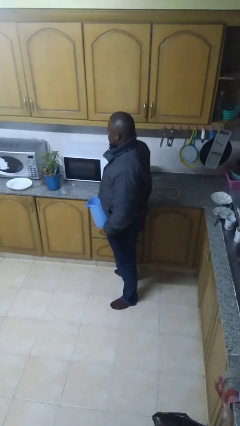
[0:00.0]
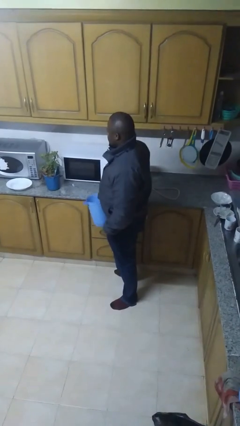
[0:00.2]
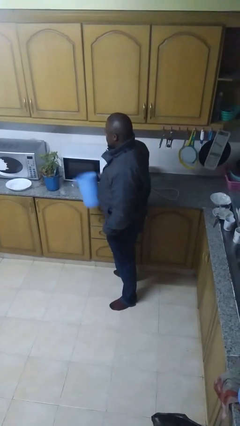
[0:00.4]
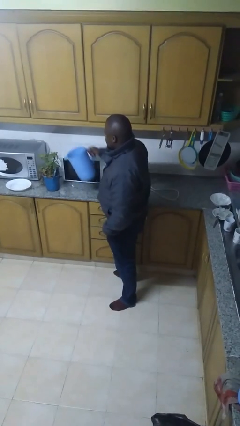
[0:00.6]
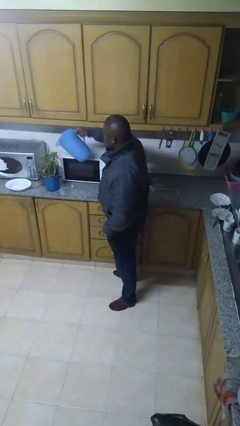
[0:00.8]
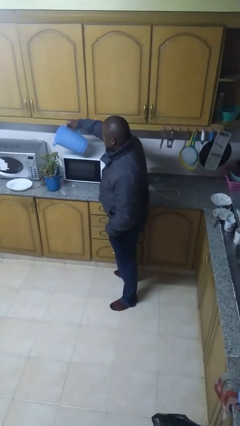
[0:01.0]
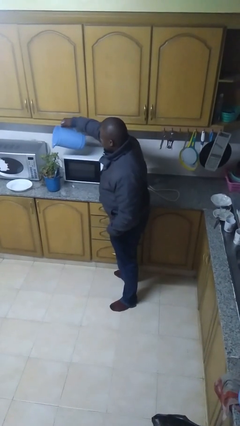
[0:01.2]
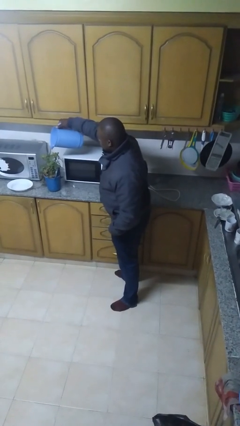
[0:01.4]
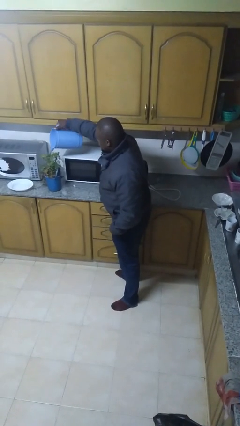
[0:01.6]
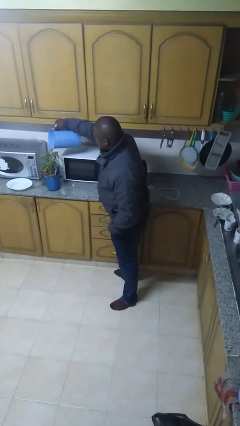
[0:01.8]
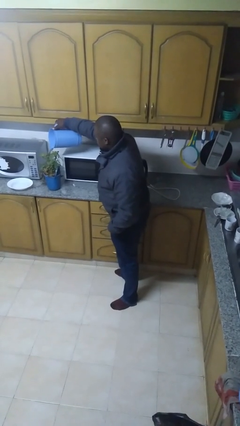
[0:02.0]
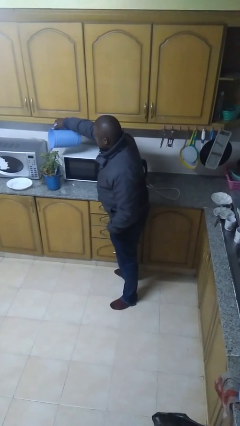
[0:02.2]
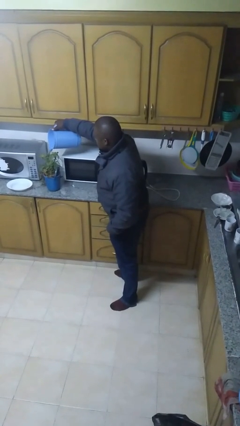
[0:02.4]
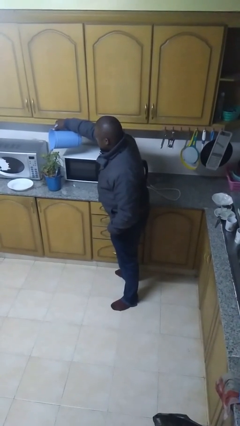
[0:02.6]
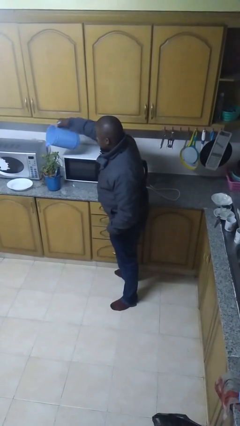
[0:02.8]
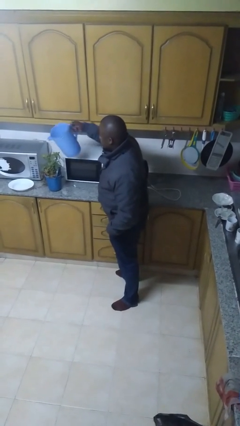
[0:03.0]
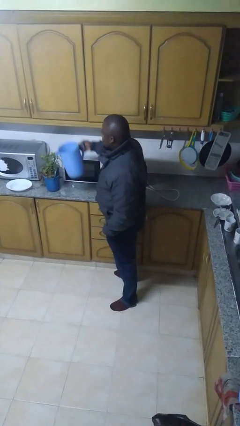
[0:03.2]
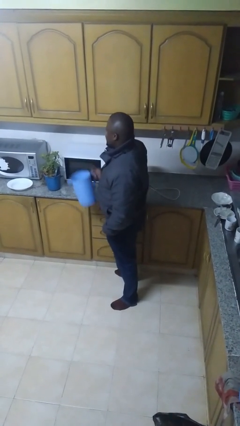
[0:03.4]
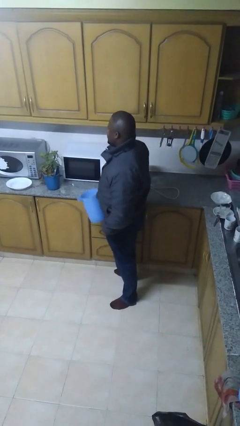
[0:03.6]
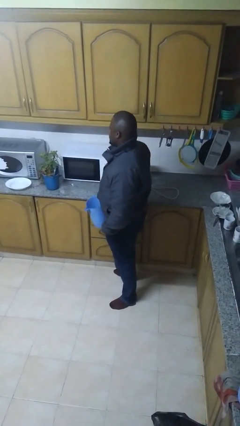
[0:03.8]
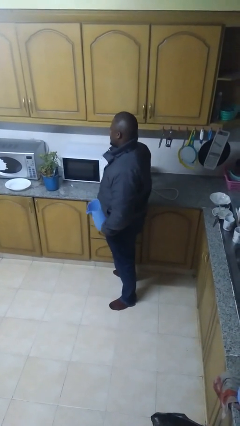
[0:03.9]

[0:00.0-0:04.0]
person waters houseplant

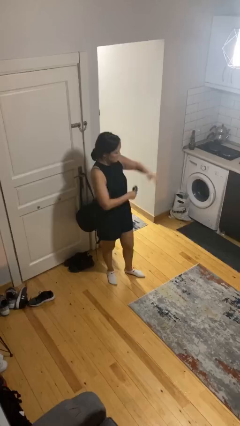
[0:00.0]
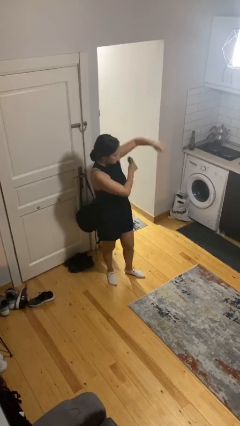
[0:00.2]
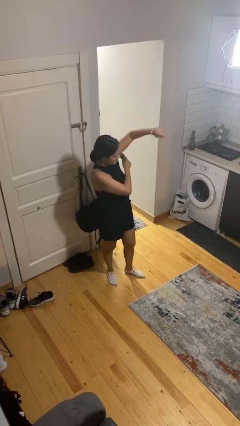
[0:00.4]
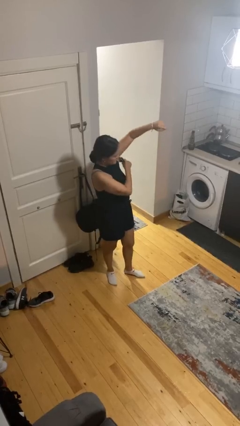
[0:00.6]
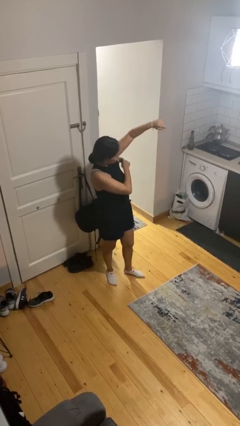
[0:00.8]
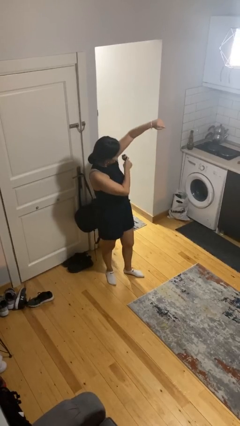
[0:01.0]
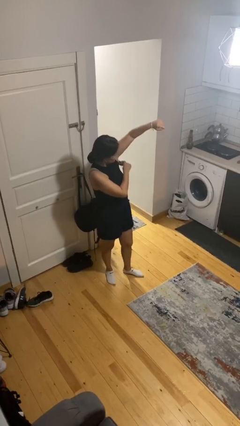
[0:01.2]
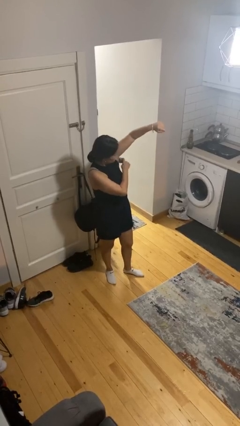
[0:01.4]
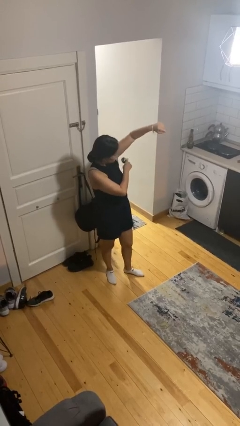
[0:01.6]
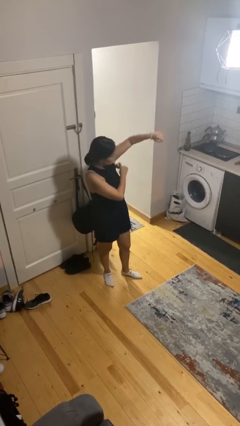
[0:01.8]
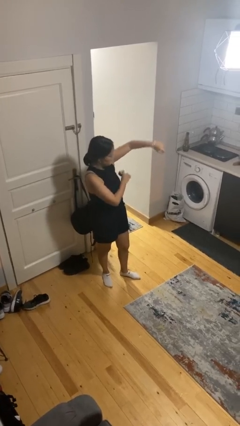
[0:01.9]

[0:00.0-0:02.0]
person applies deodorant

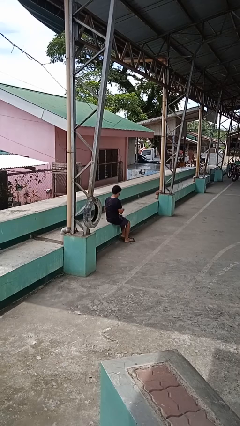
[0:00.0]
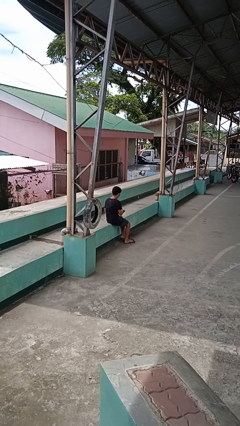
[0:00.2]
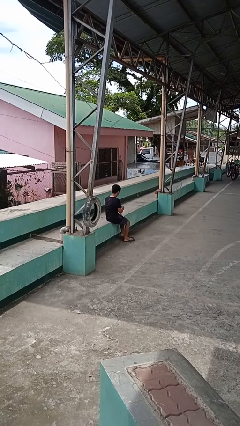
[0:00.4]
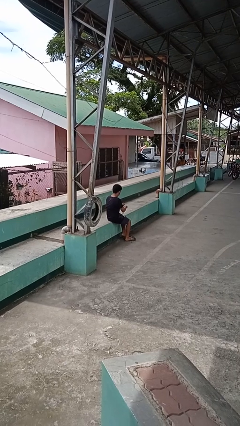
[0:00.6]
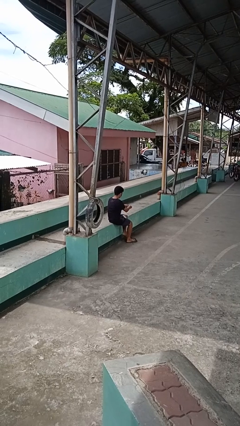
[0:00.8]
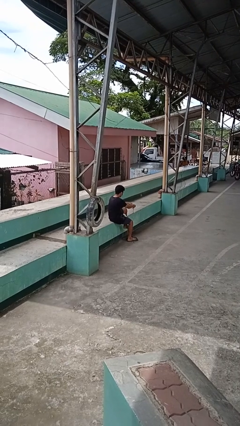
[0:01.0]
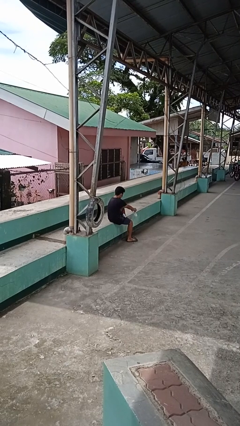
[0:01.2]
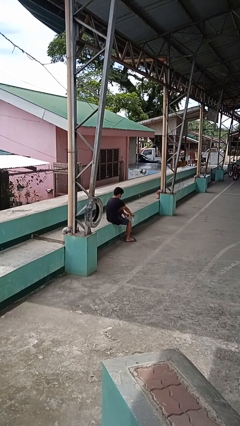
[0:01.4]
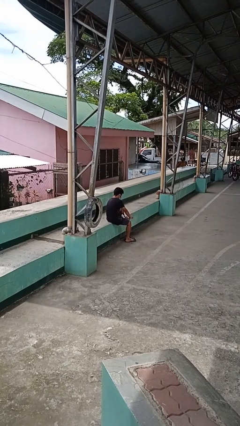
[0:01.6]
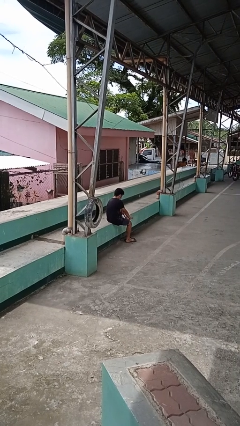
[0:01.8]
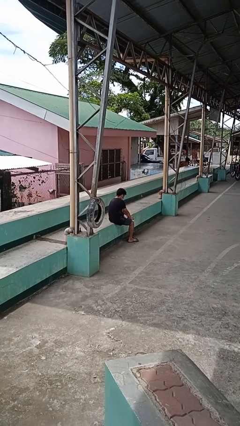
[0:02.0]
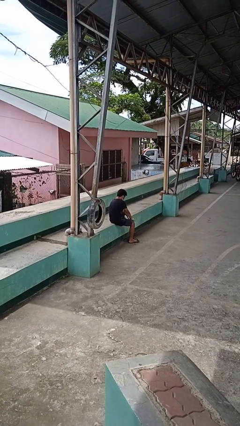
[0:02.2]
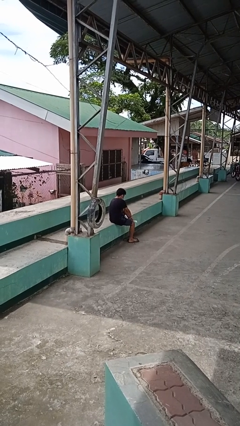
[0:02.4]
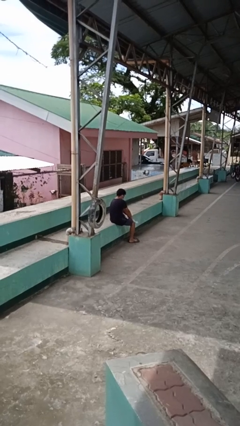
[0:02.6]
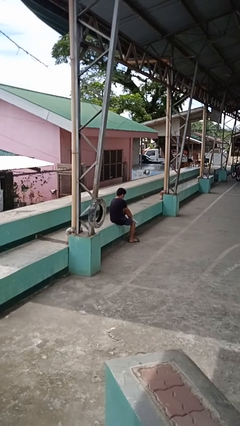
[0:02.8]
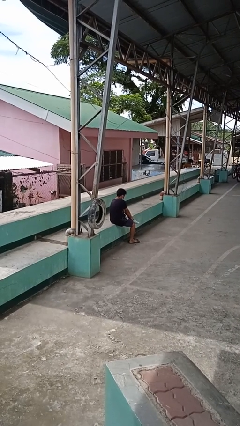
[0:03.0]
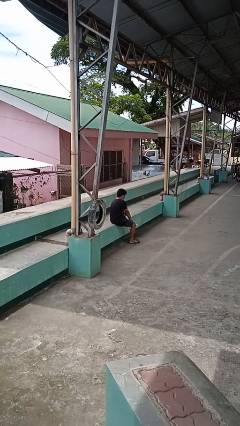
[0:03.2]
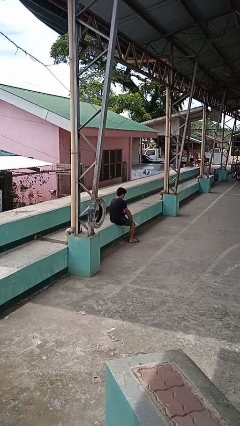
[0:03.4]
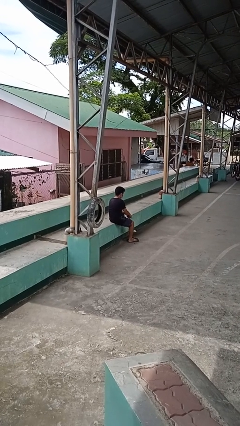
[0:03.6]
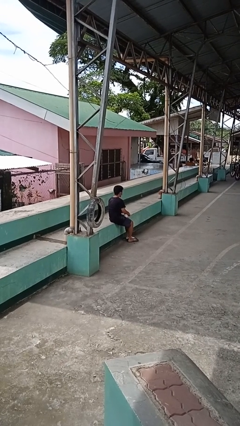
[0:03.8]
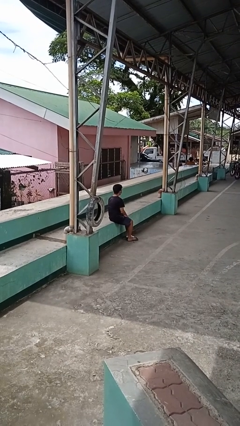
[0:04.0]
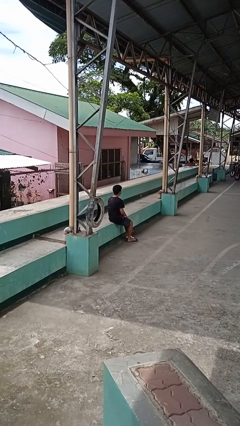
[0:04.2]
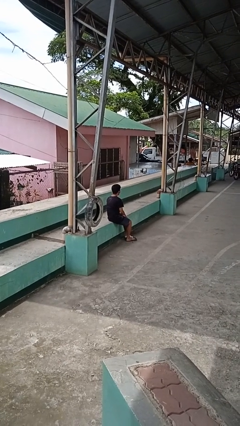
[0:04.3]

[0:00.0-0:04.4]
person puts on socks

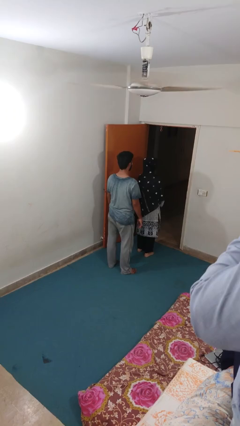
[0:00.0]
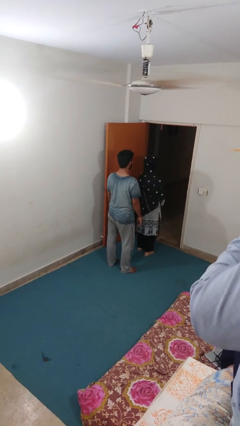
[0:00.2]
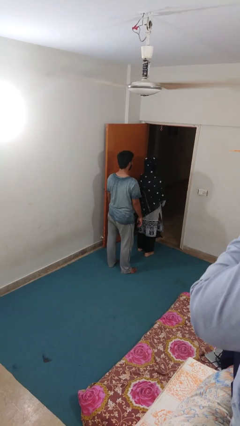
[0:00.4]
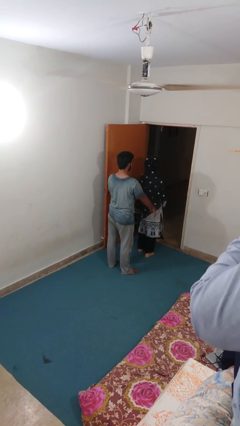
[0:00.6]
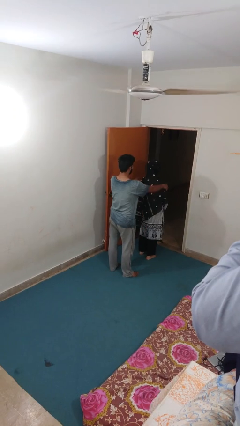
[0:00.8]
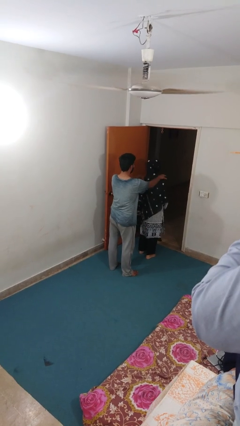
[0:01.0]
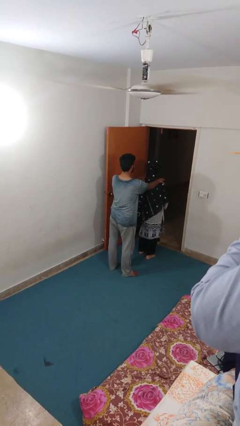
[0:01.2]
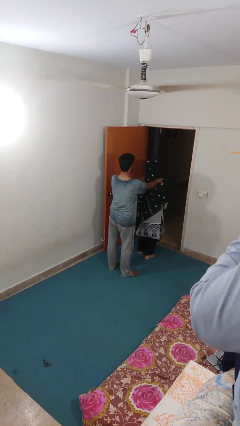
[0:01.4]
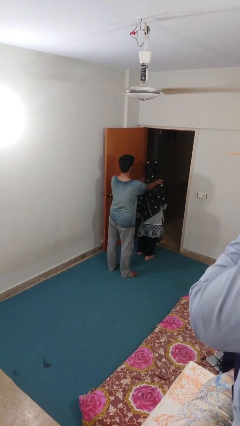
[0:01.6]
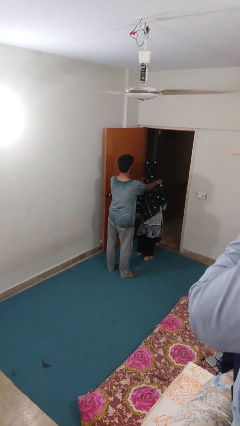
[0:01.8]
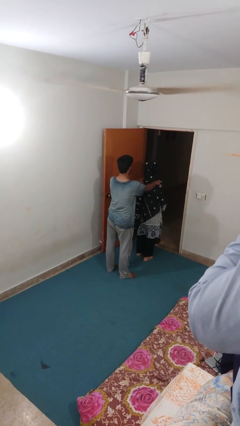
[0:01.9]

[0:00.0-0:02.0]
person grabs person by shoulder

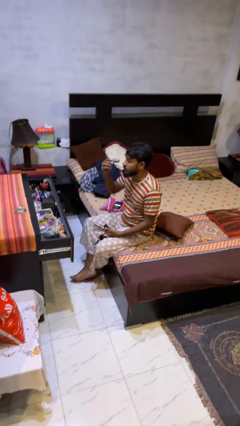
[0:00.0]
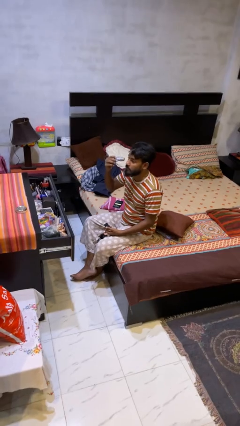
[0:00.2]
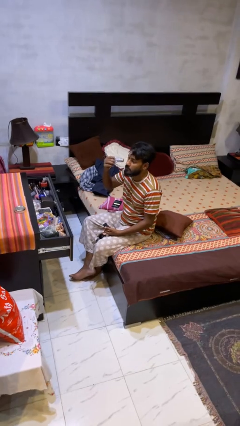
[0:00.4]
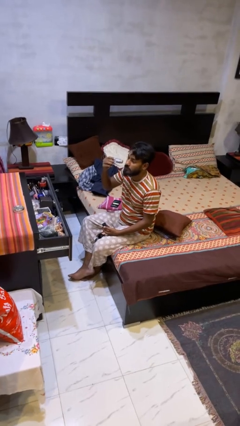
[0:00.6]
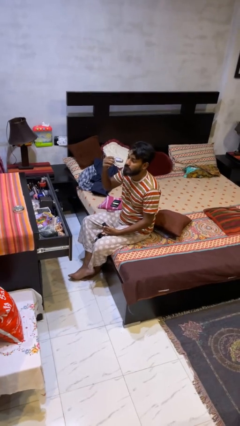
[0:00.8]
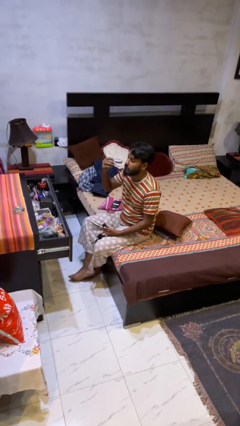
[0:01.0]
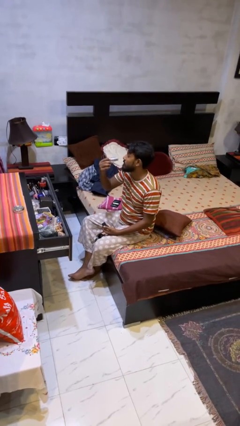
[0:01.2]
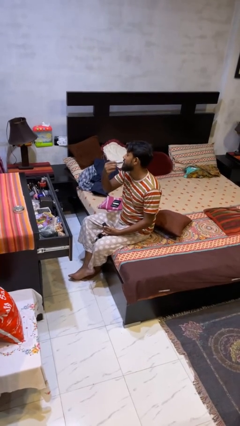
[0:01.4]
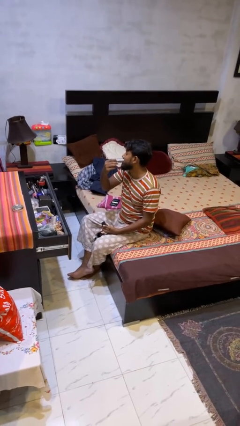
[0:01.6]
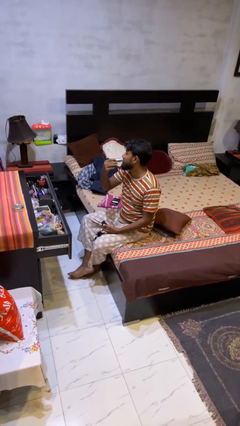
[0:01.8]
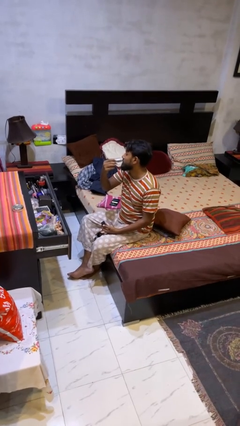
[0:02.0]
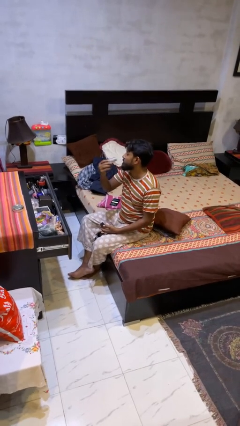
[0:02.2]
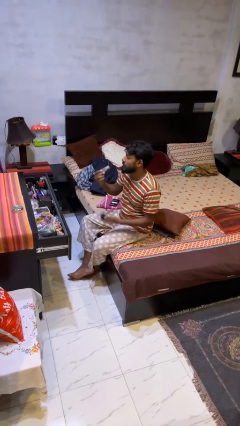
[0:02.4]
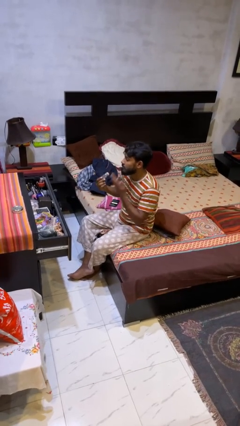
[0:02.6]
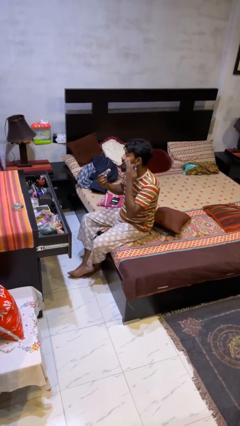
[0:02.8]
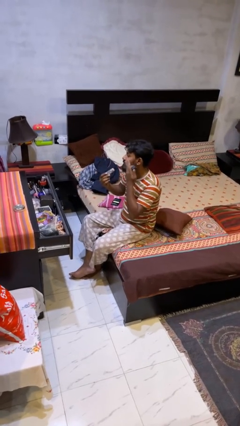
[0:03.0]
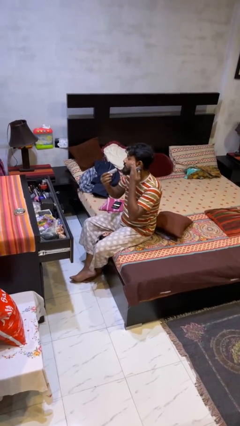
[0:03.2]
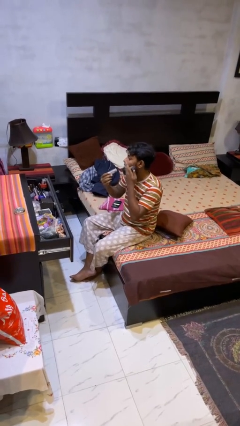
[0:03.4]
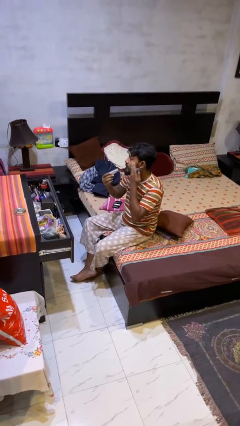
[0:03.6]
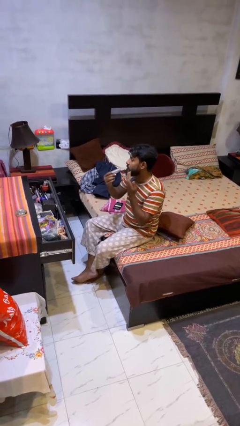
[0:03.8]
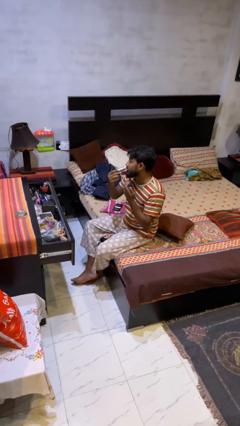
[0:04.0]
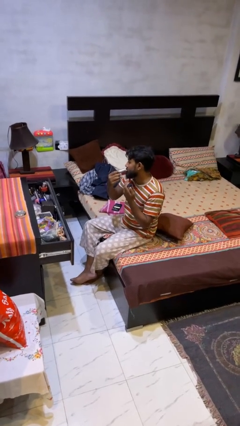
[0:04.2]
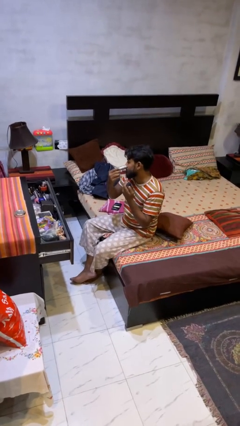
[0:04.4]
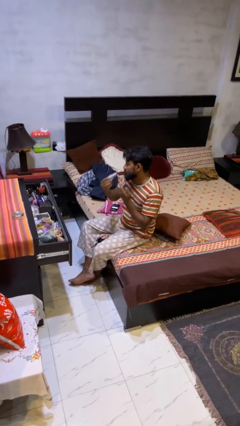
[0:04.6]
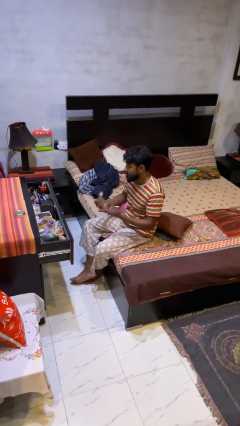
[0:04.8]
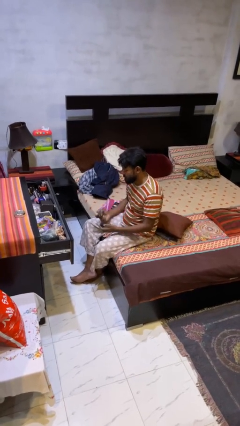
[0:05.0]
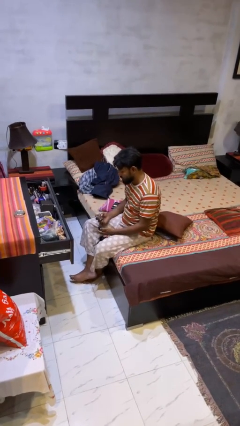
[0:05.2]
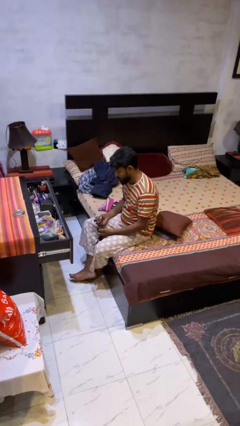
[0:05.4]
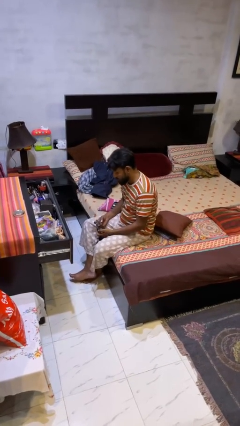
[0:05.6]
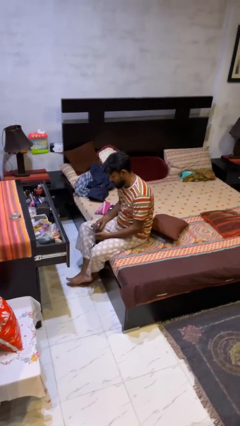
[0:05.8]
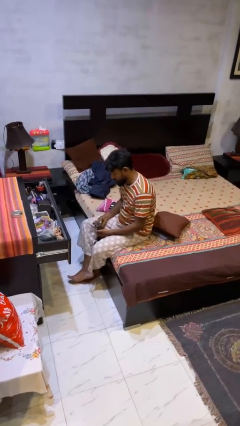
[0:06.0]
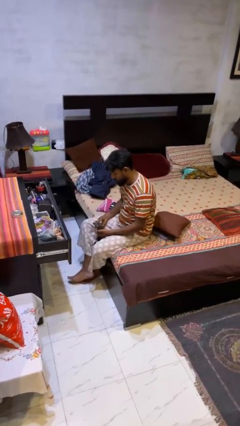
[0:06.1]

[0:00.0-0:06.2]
person applies foundation makeup
